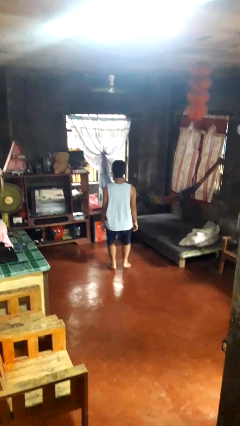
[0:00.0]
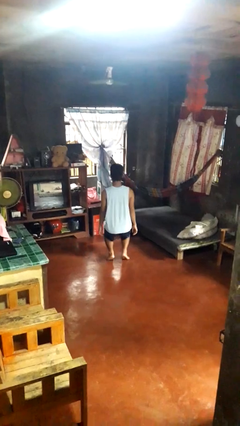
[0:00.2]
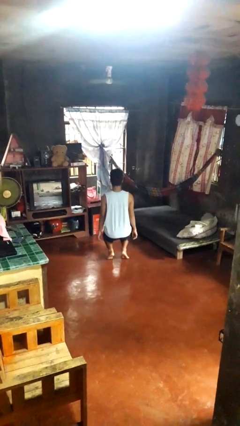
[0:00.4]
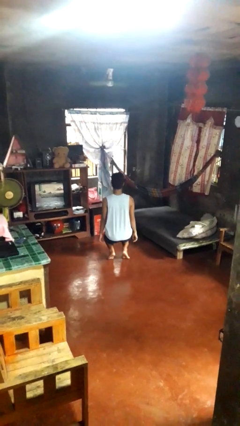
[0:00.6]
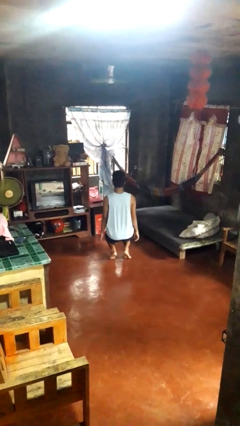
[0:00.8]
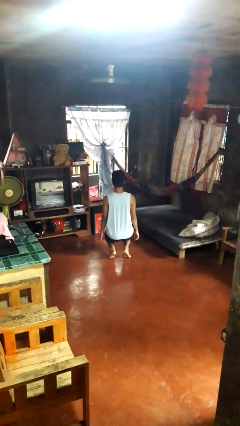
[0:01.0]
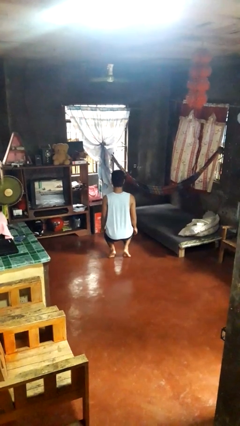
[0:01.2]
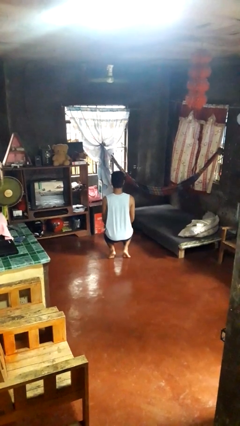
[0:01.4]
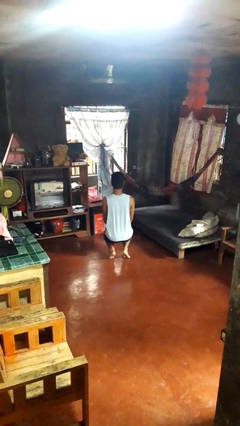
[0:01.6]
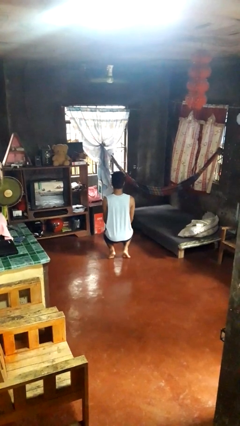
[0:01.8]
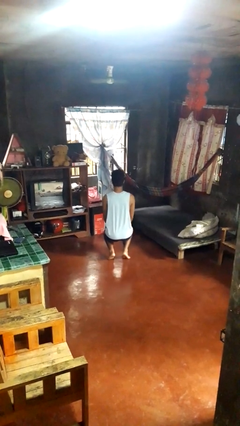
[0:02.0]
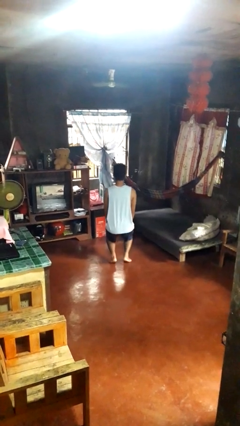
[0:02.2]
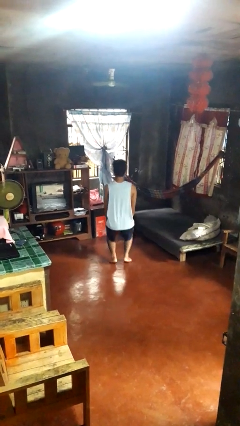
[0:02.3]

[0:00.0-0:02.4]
person squats

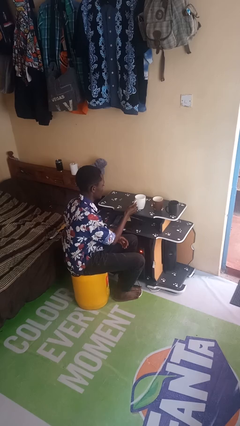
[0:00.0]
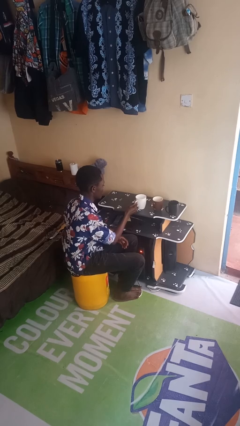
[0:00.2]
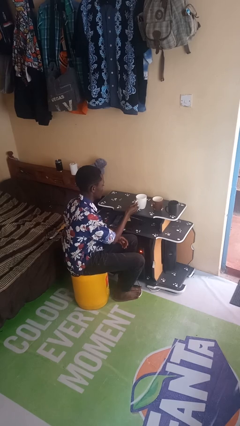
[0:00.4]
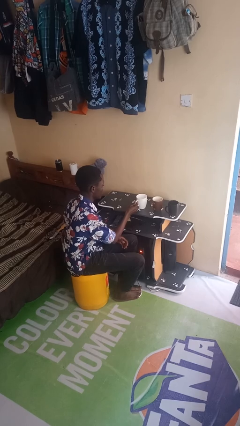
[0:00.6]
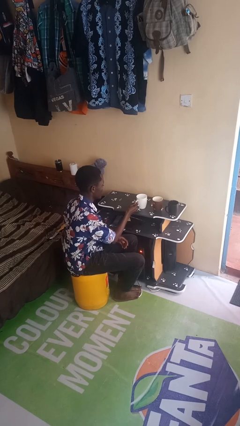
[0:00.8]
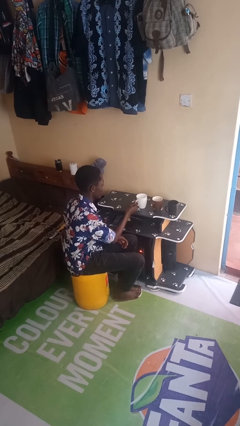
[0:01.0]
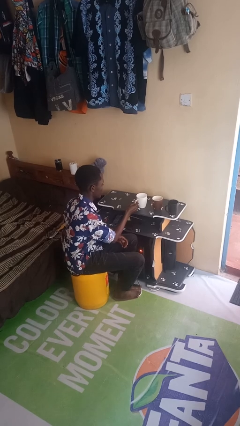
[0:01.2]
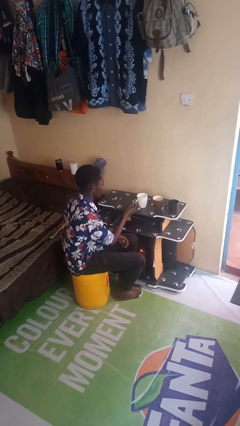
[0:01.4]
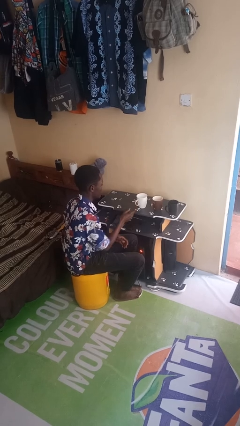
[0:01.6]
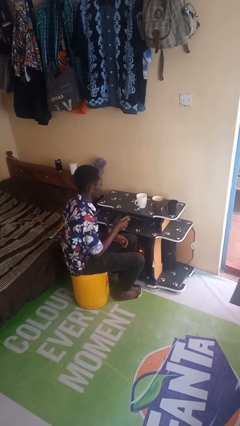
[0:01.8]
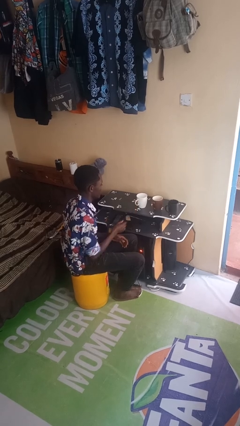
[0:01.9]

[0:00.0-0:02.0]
person puts down object on table

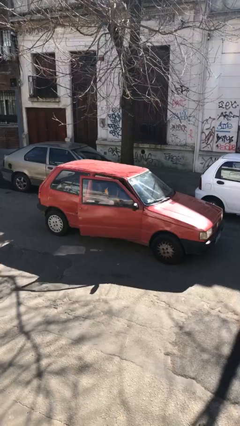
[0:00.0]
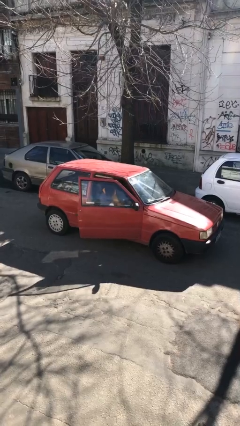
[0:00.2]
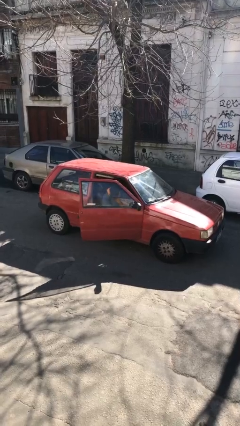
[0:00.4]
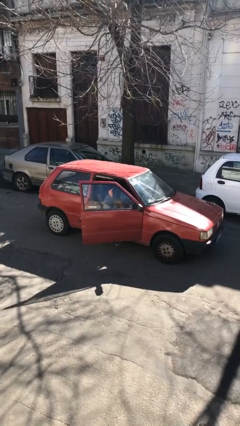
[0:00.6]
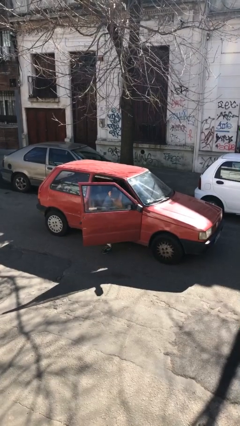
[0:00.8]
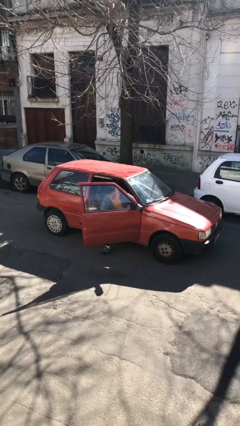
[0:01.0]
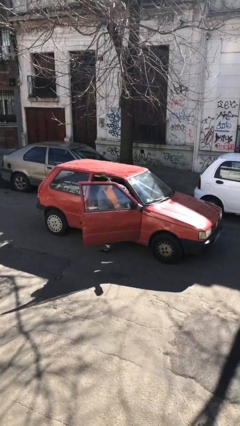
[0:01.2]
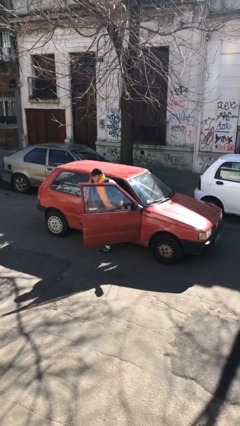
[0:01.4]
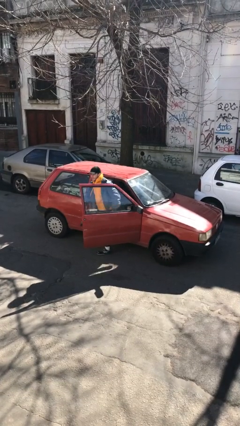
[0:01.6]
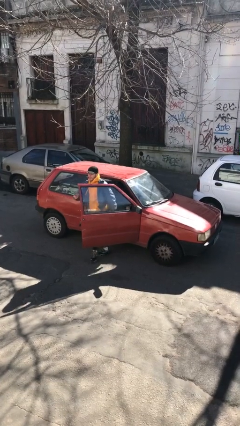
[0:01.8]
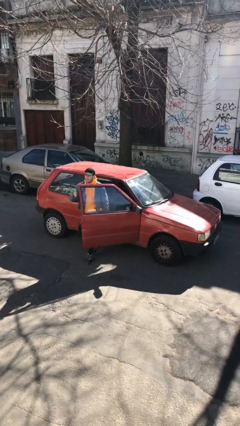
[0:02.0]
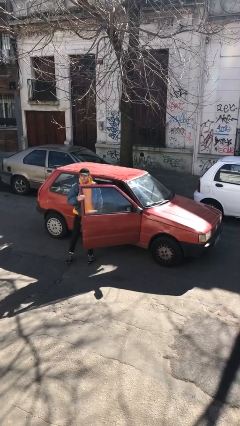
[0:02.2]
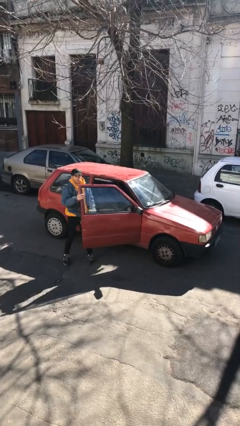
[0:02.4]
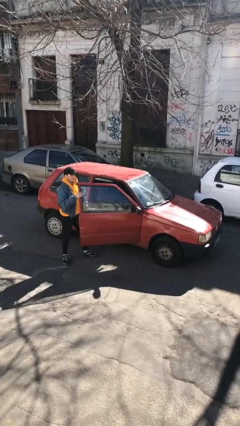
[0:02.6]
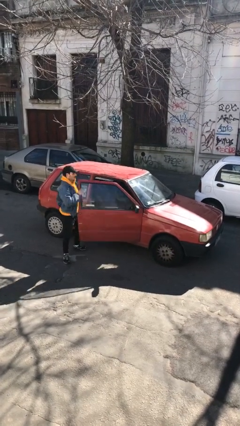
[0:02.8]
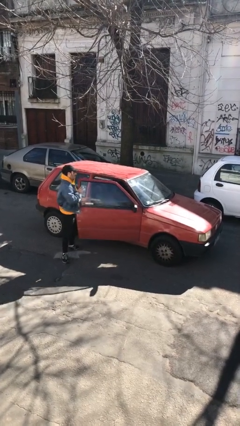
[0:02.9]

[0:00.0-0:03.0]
car drops off person

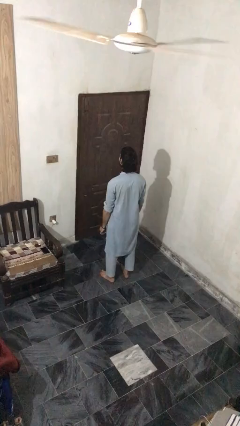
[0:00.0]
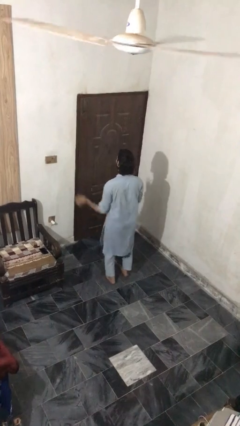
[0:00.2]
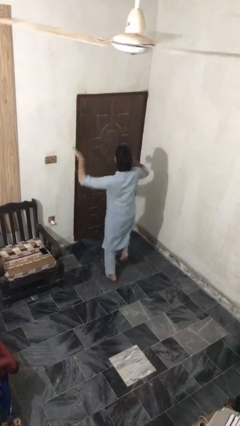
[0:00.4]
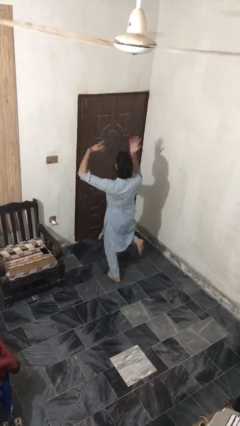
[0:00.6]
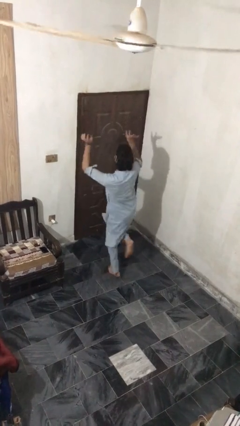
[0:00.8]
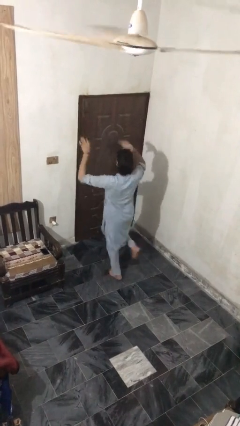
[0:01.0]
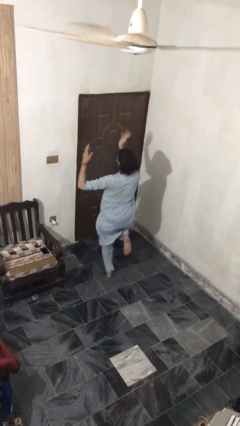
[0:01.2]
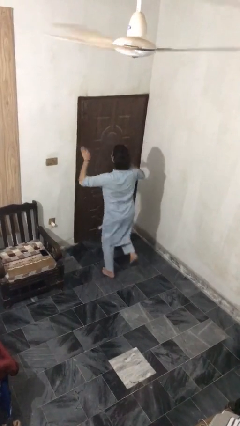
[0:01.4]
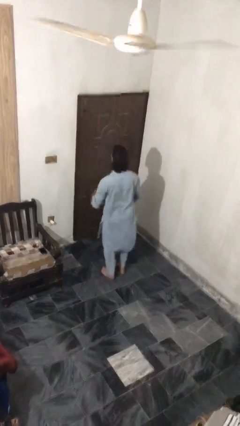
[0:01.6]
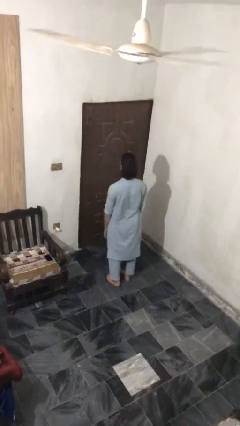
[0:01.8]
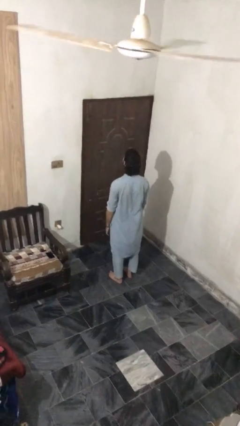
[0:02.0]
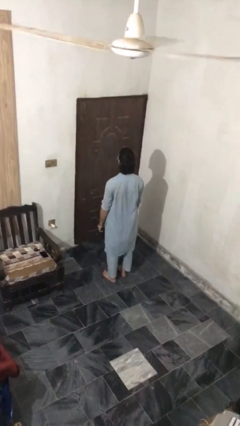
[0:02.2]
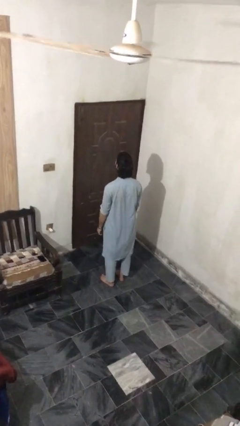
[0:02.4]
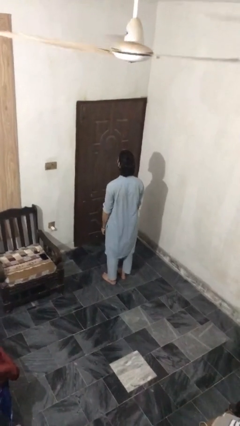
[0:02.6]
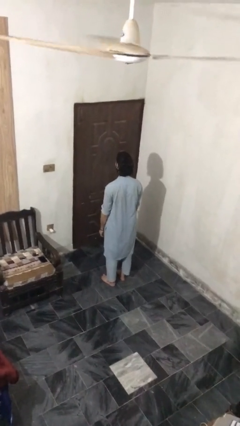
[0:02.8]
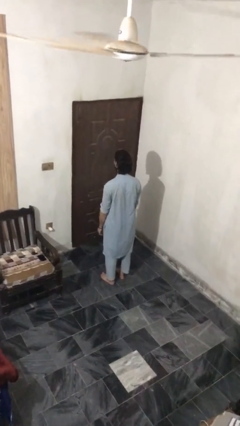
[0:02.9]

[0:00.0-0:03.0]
person dances in place

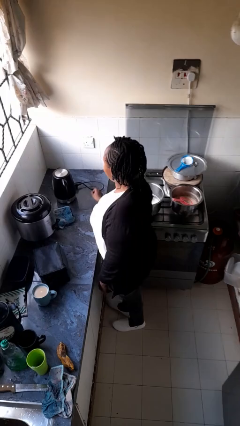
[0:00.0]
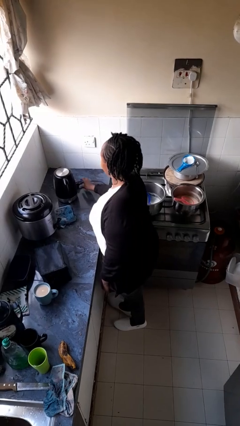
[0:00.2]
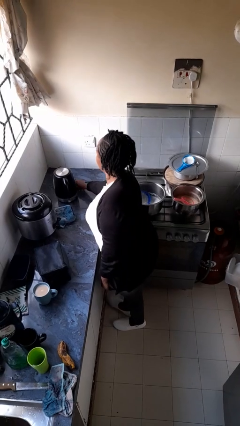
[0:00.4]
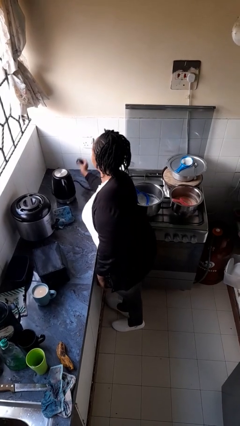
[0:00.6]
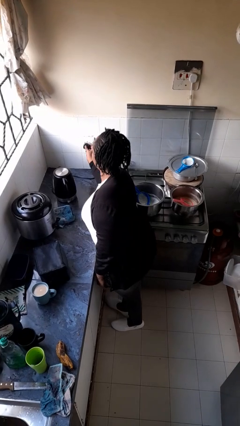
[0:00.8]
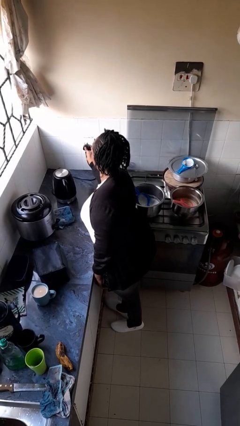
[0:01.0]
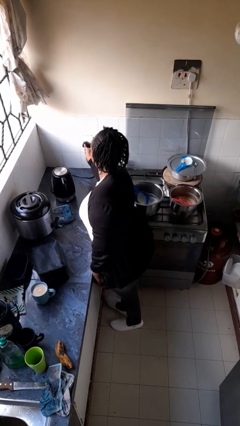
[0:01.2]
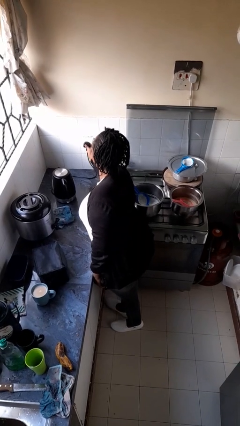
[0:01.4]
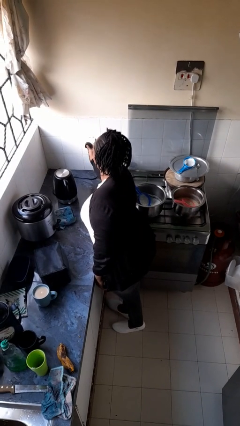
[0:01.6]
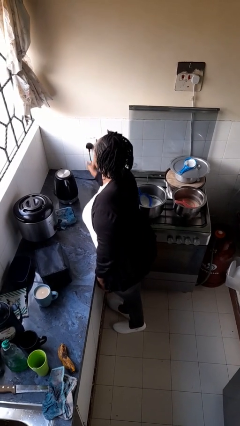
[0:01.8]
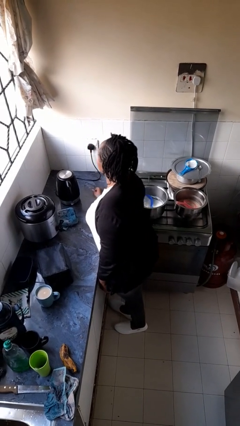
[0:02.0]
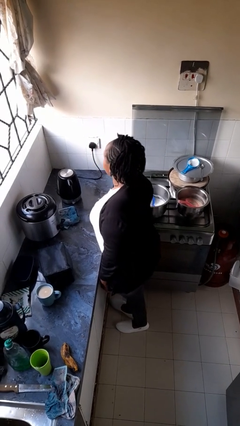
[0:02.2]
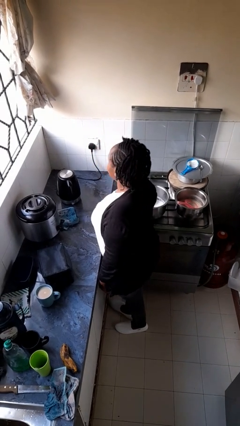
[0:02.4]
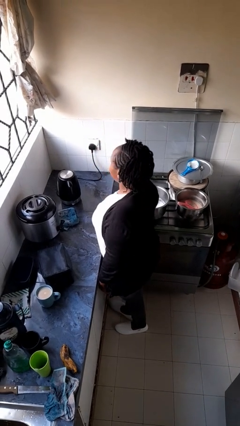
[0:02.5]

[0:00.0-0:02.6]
person plugs into electrical socket

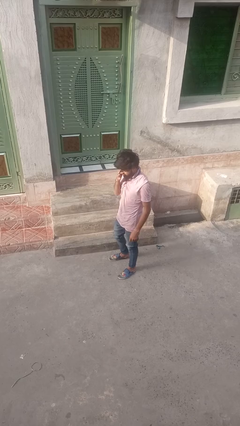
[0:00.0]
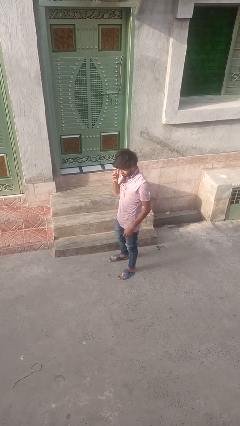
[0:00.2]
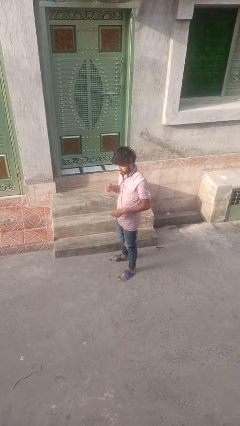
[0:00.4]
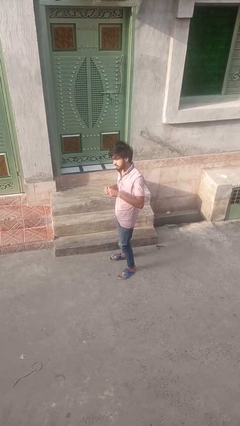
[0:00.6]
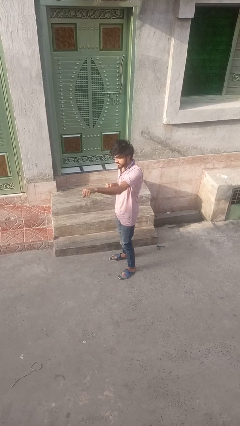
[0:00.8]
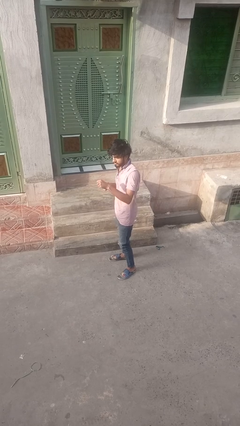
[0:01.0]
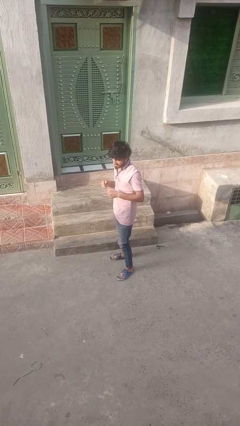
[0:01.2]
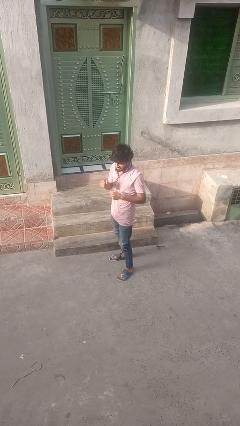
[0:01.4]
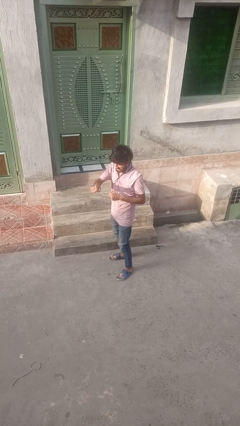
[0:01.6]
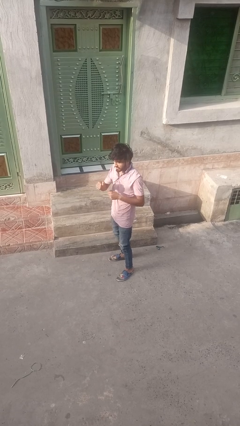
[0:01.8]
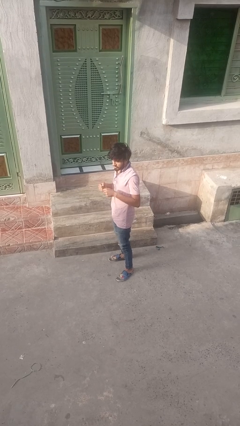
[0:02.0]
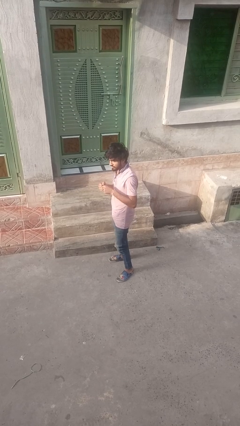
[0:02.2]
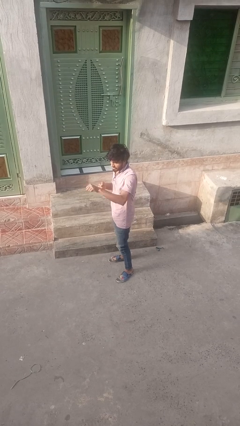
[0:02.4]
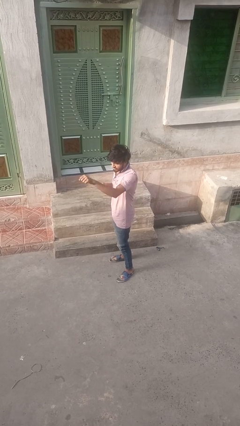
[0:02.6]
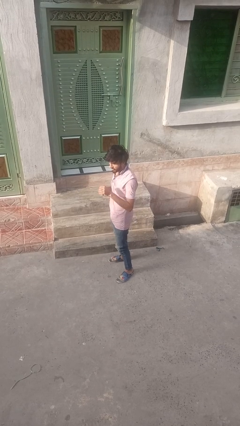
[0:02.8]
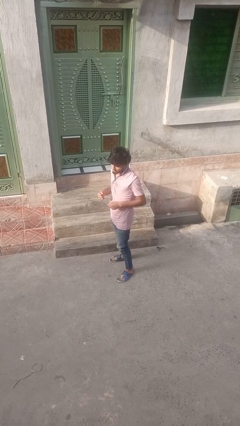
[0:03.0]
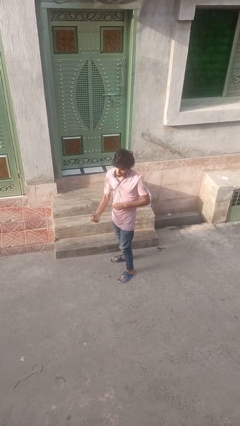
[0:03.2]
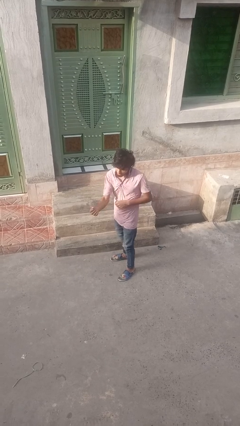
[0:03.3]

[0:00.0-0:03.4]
person punches

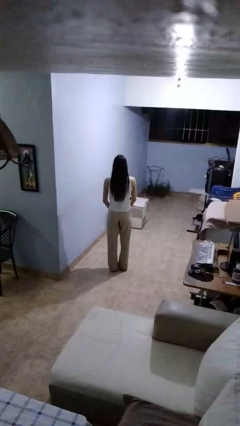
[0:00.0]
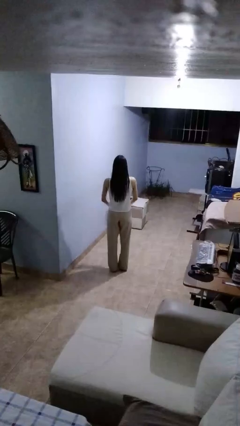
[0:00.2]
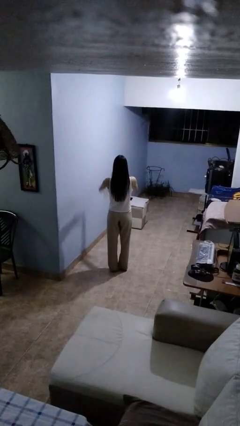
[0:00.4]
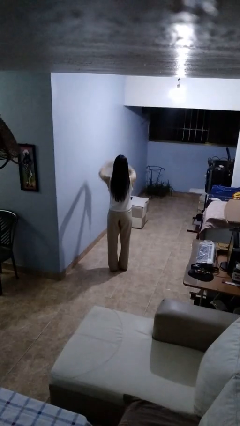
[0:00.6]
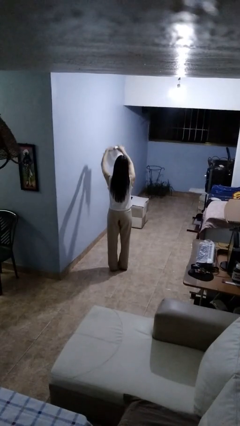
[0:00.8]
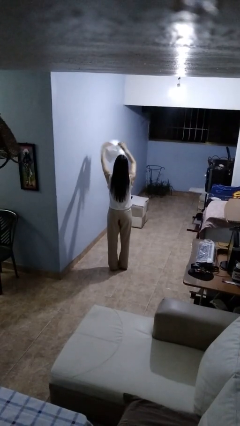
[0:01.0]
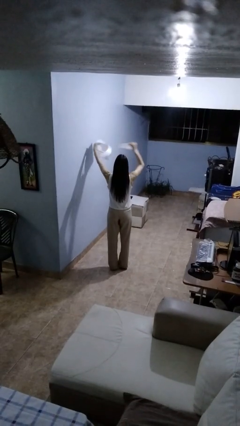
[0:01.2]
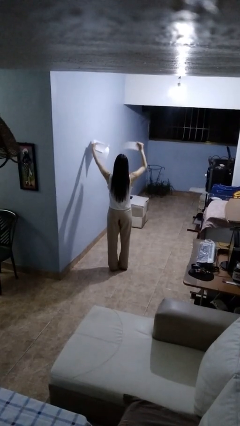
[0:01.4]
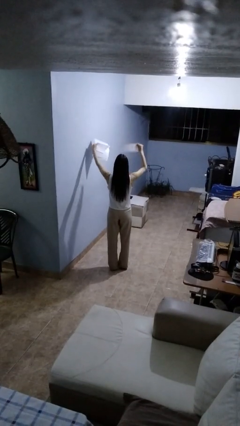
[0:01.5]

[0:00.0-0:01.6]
person tears paper
